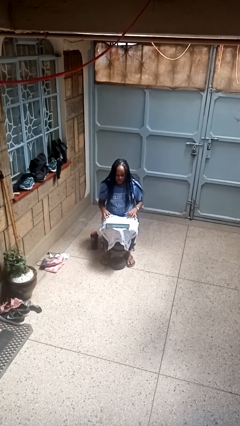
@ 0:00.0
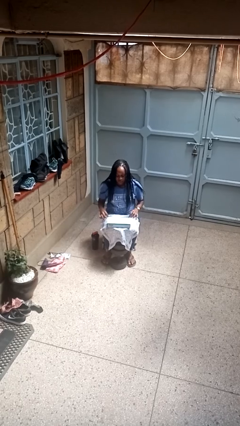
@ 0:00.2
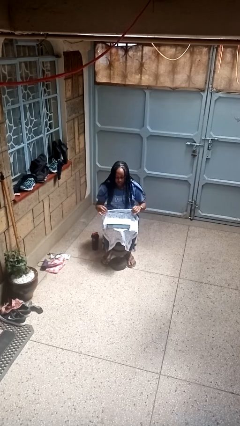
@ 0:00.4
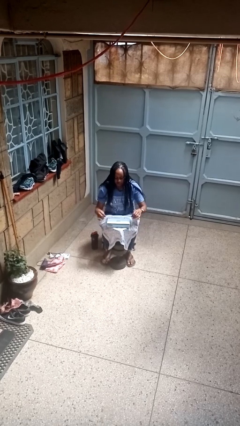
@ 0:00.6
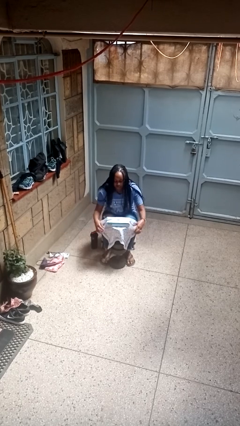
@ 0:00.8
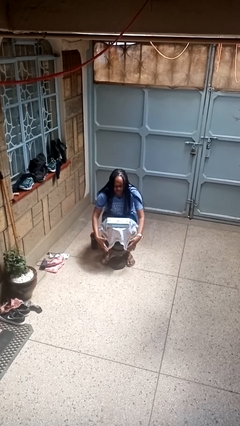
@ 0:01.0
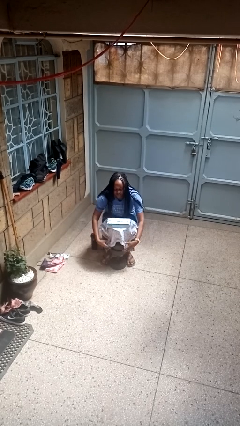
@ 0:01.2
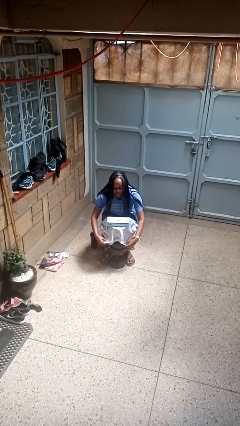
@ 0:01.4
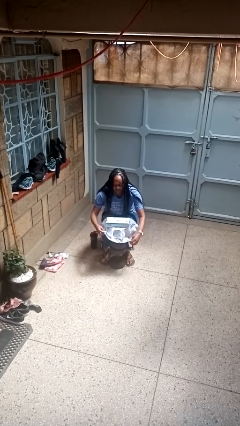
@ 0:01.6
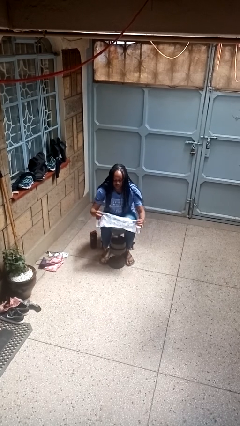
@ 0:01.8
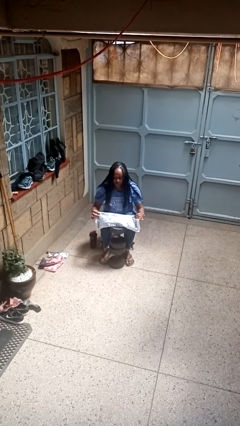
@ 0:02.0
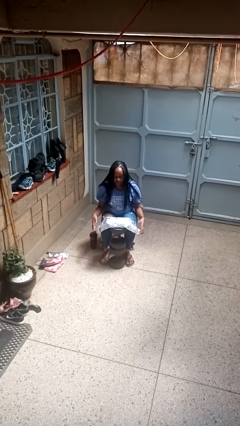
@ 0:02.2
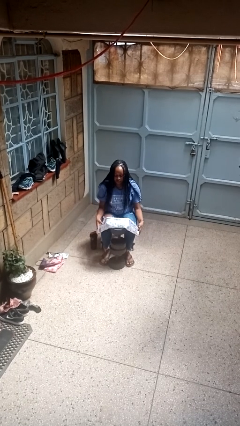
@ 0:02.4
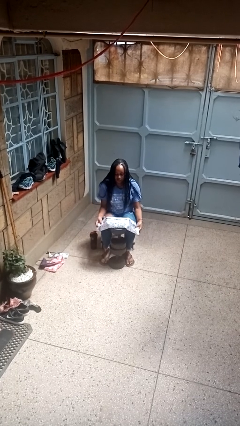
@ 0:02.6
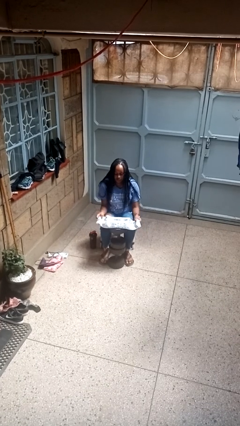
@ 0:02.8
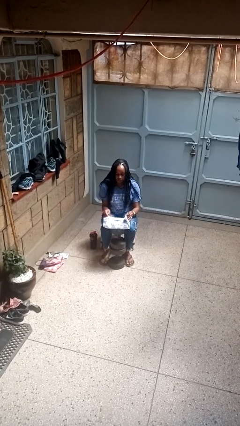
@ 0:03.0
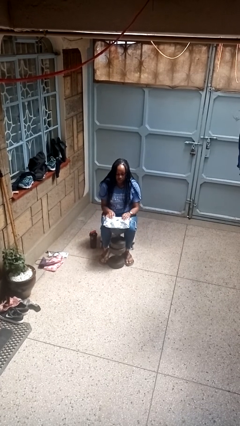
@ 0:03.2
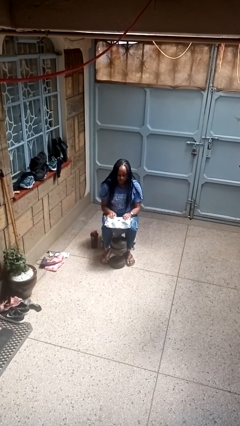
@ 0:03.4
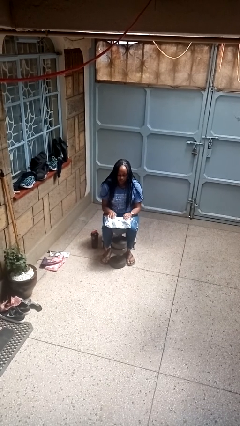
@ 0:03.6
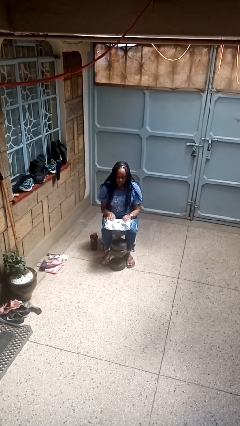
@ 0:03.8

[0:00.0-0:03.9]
person wraps box

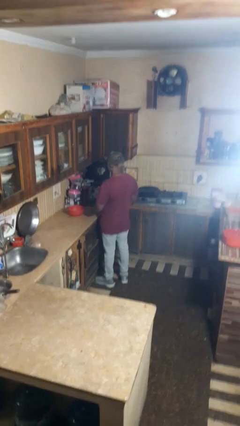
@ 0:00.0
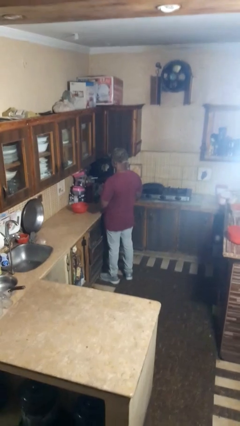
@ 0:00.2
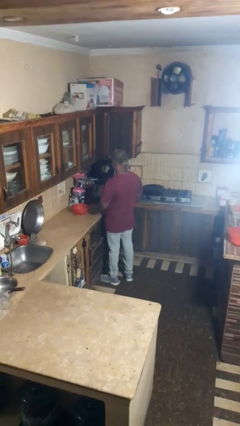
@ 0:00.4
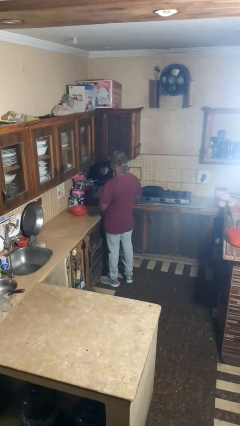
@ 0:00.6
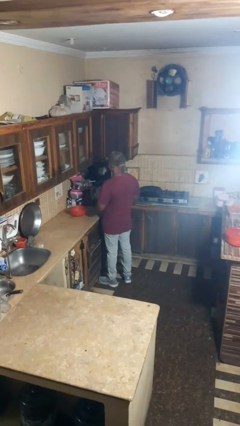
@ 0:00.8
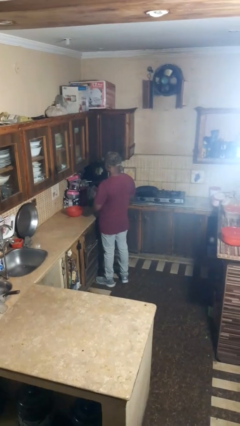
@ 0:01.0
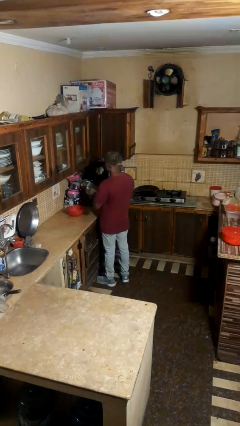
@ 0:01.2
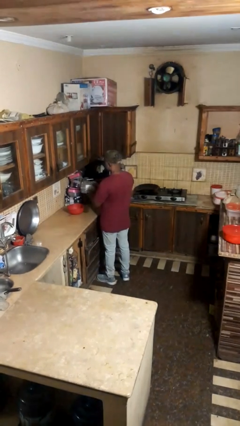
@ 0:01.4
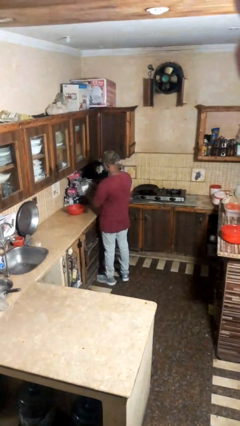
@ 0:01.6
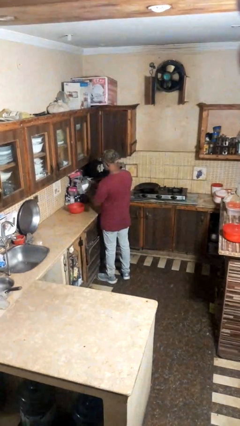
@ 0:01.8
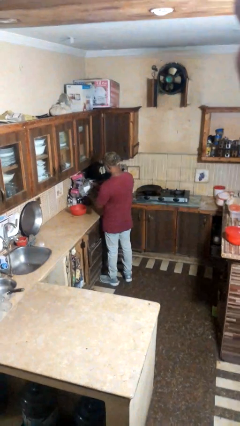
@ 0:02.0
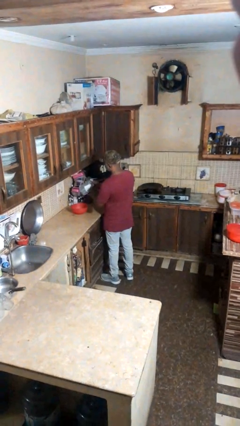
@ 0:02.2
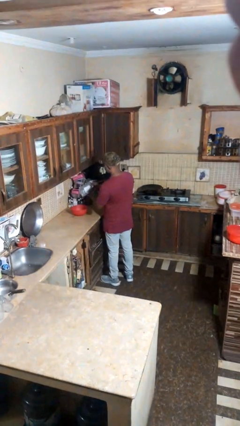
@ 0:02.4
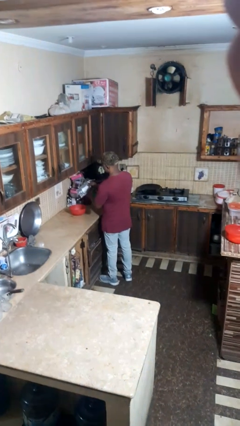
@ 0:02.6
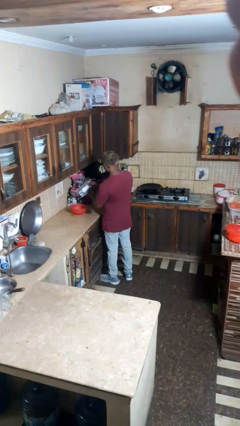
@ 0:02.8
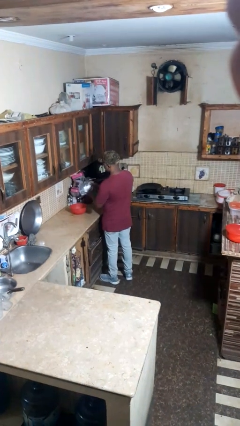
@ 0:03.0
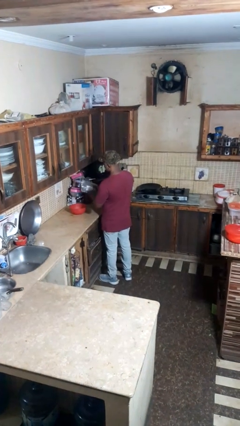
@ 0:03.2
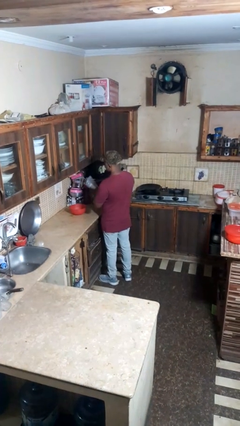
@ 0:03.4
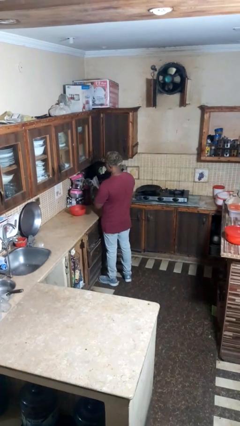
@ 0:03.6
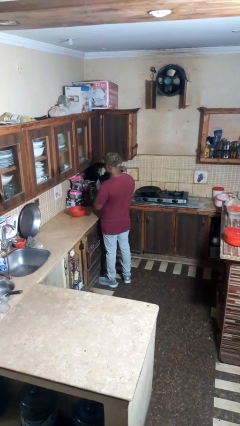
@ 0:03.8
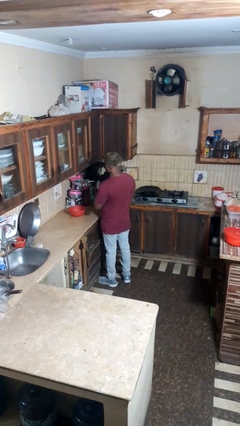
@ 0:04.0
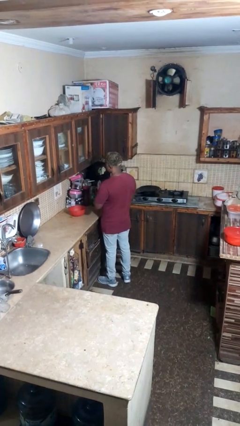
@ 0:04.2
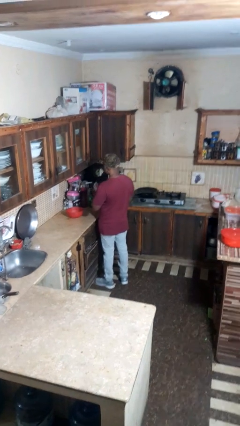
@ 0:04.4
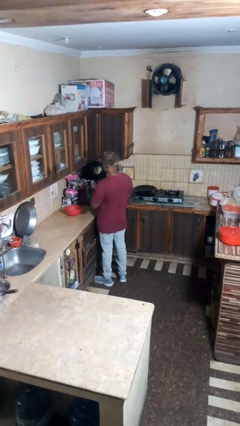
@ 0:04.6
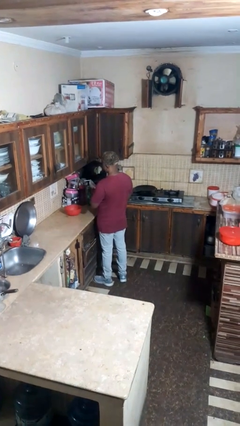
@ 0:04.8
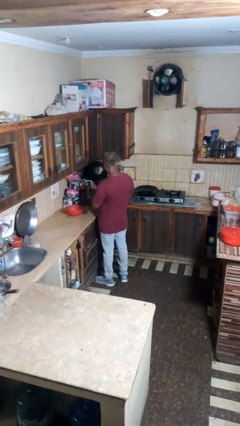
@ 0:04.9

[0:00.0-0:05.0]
person pours into bowl

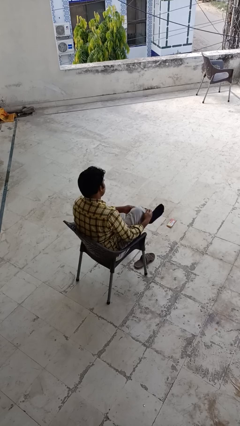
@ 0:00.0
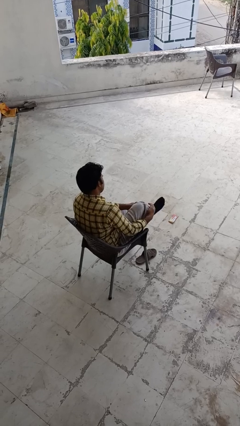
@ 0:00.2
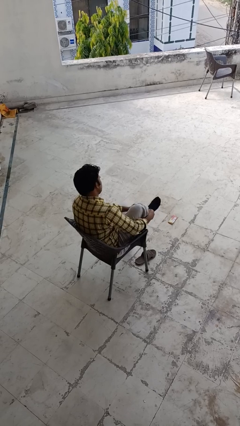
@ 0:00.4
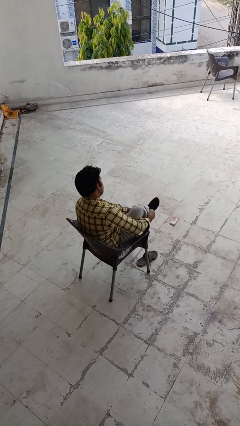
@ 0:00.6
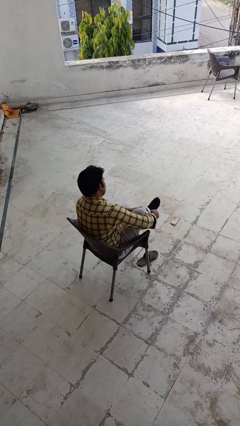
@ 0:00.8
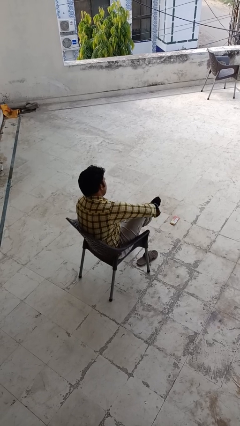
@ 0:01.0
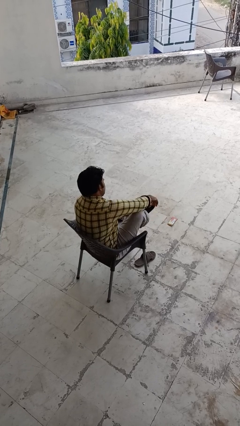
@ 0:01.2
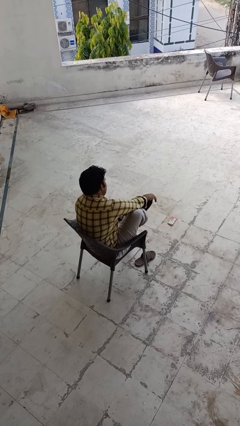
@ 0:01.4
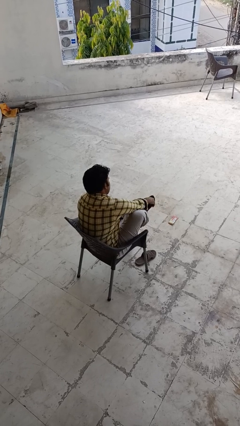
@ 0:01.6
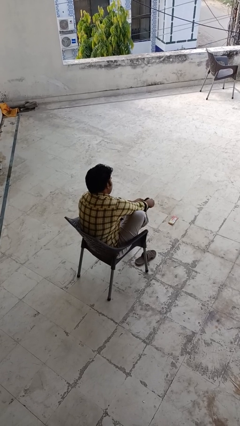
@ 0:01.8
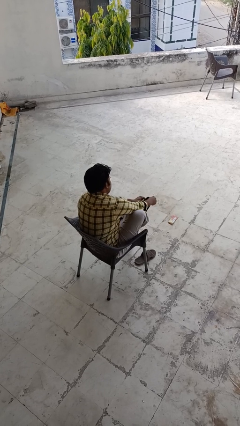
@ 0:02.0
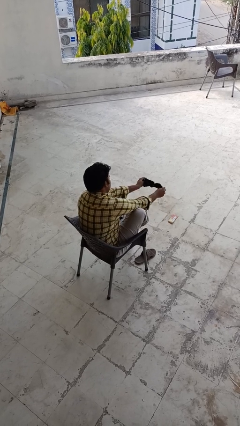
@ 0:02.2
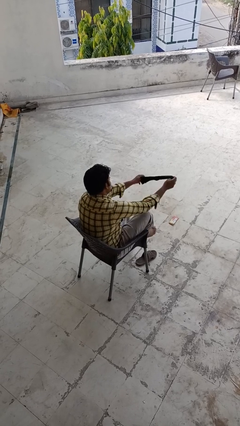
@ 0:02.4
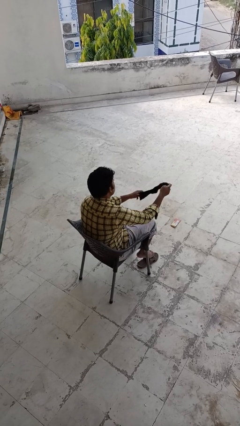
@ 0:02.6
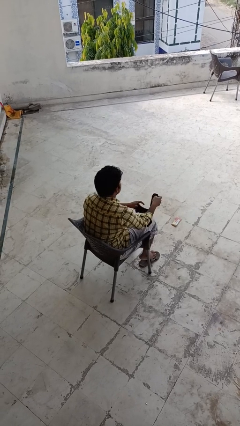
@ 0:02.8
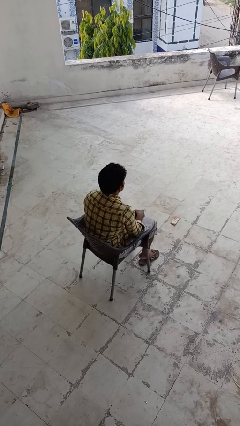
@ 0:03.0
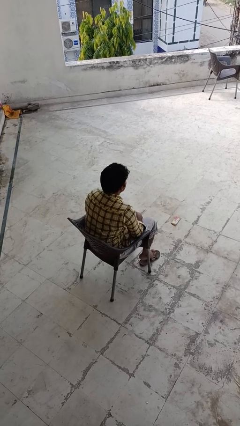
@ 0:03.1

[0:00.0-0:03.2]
person takes off socks

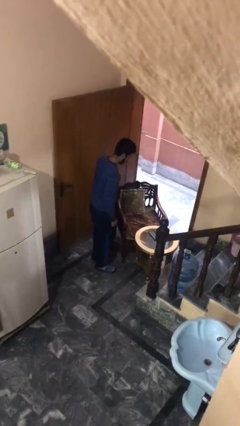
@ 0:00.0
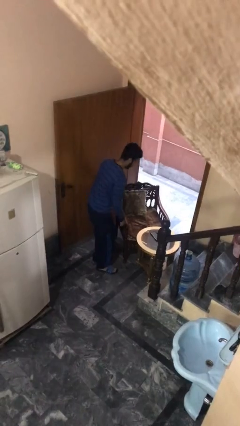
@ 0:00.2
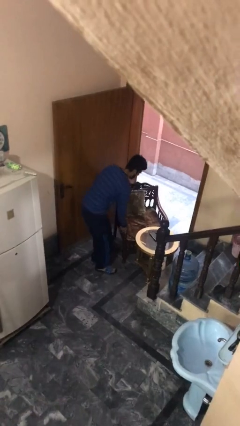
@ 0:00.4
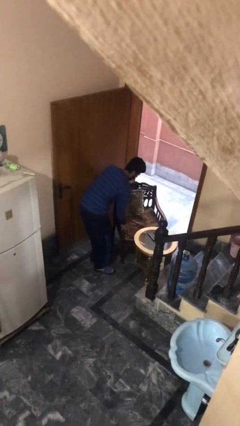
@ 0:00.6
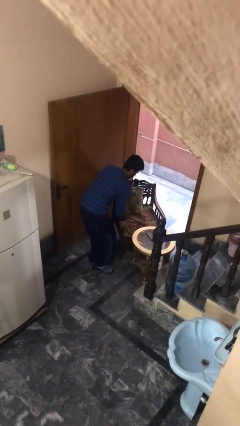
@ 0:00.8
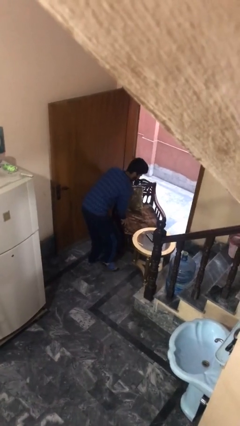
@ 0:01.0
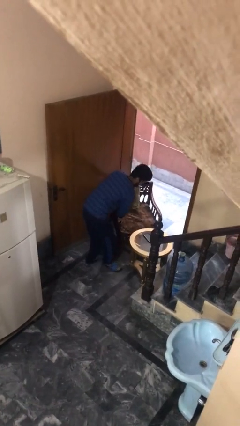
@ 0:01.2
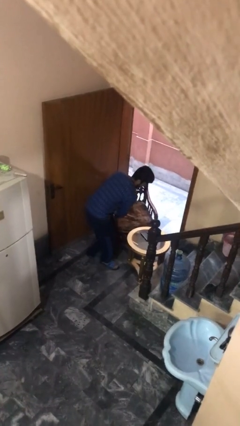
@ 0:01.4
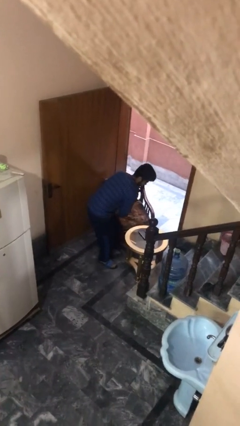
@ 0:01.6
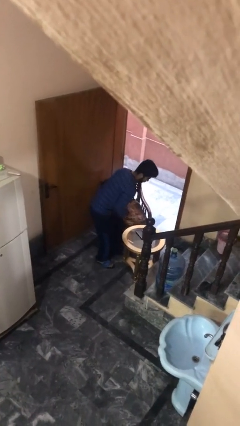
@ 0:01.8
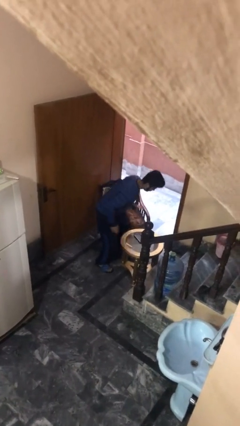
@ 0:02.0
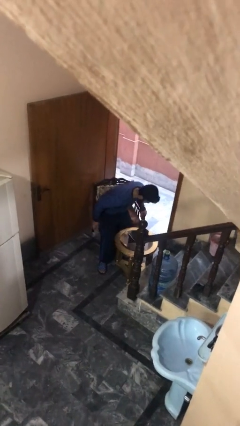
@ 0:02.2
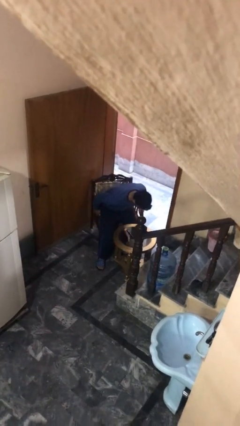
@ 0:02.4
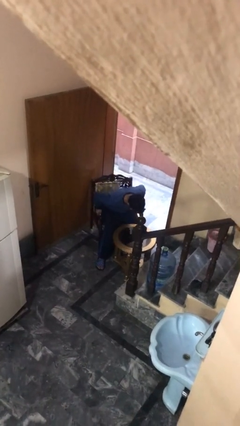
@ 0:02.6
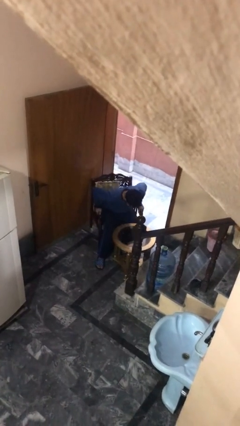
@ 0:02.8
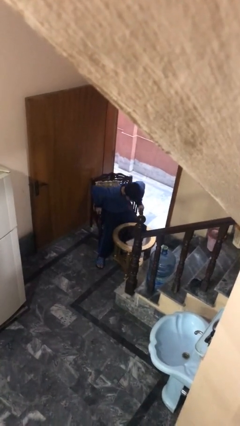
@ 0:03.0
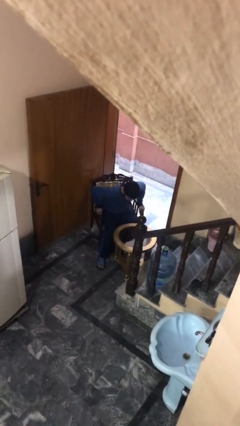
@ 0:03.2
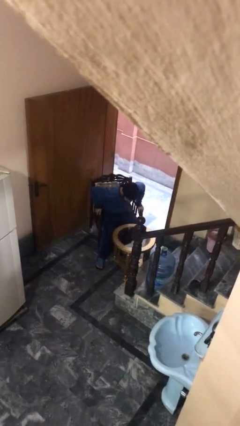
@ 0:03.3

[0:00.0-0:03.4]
person sits down

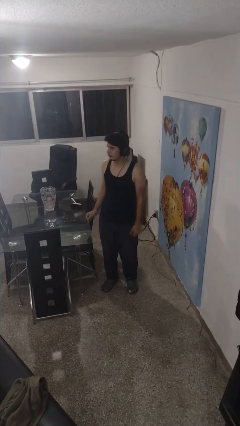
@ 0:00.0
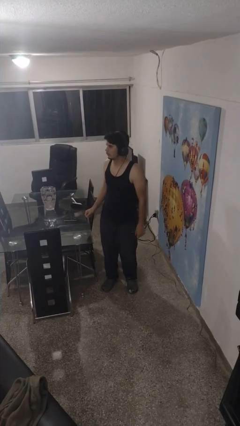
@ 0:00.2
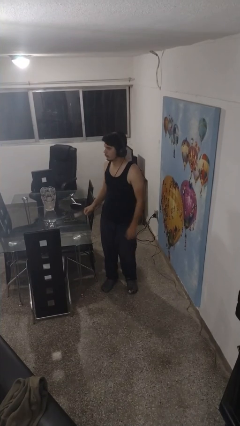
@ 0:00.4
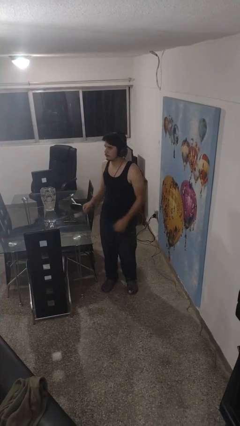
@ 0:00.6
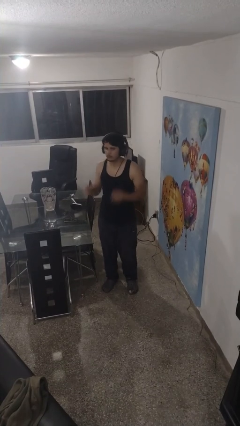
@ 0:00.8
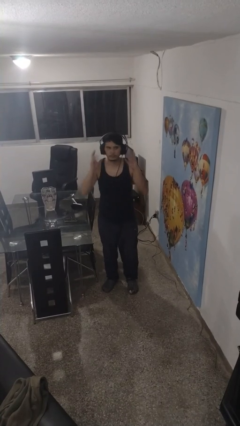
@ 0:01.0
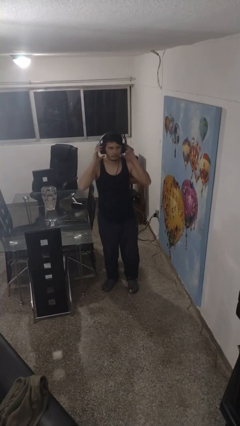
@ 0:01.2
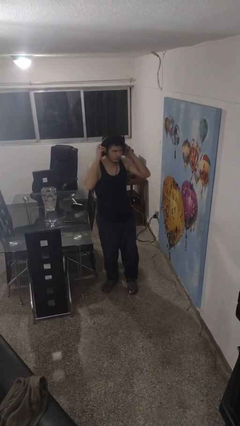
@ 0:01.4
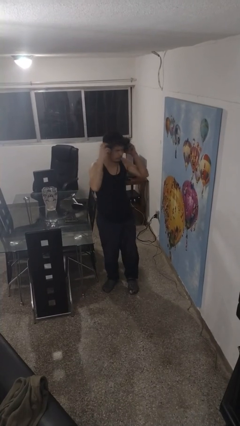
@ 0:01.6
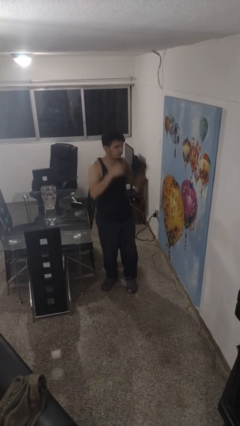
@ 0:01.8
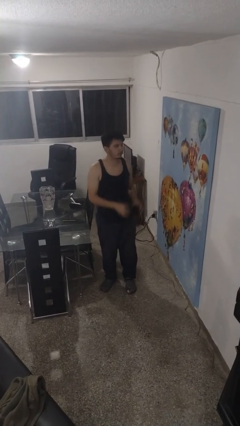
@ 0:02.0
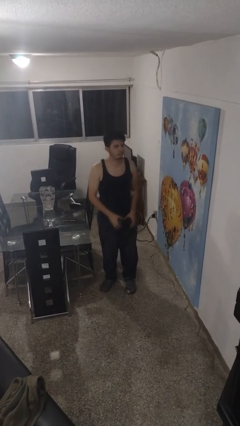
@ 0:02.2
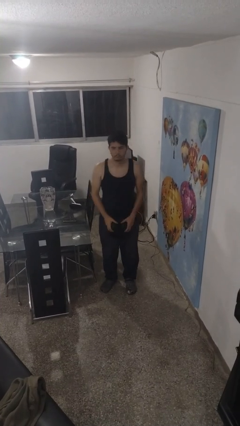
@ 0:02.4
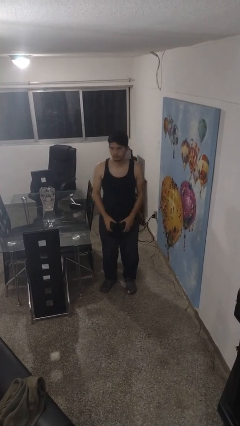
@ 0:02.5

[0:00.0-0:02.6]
person takes off headphones
